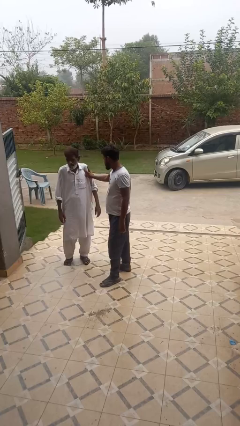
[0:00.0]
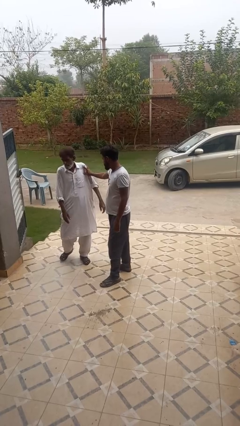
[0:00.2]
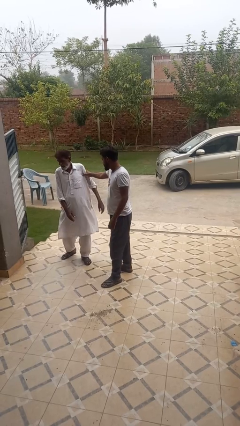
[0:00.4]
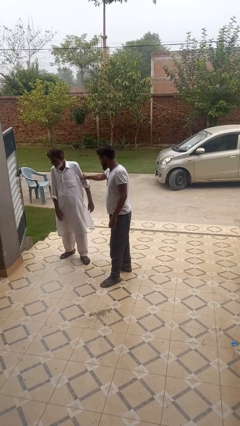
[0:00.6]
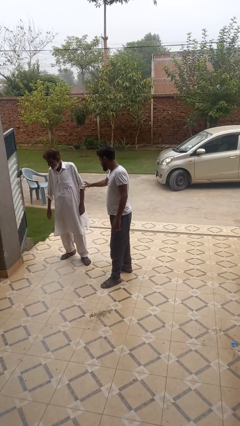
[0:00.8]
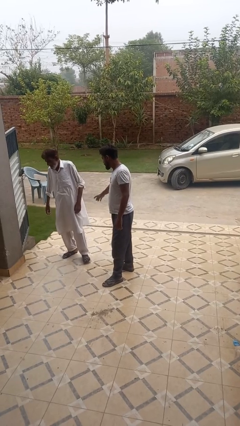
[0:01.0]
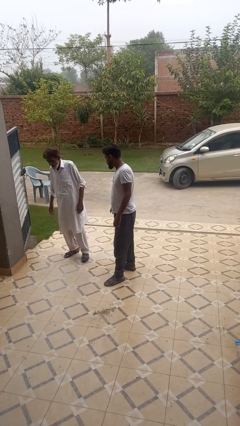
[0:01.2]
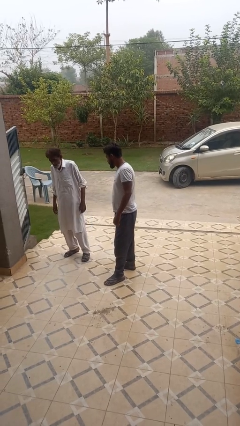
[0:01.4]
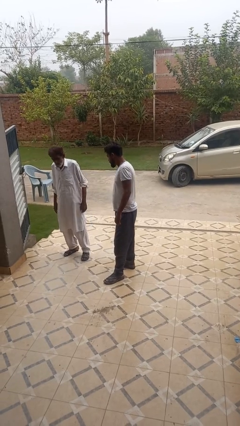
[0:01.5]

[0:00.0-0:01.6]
person shoves person

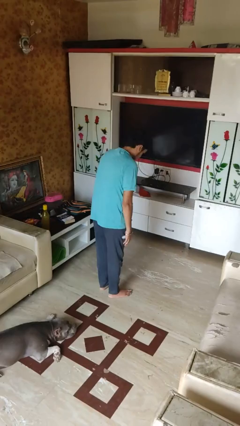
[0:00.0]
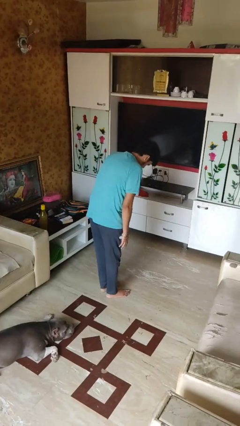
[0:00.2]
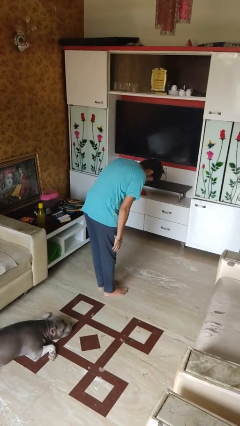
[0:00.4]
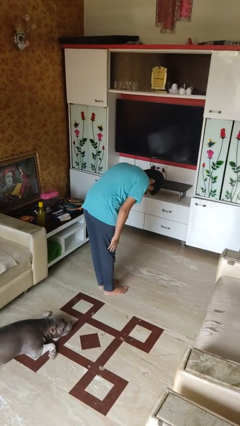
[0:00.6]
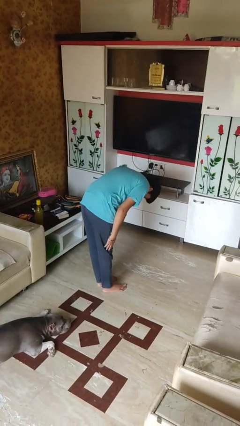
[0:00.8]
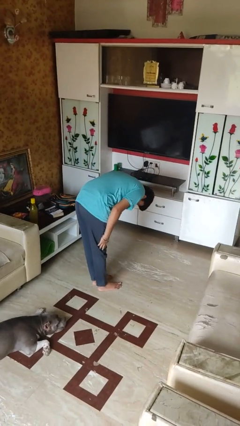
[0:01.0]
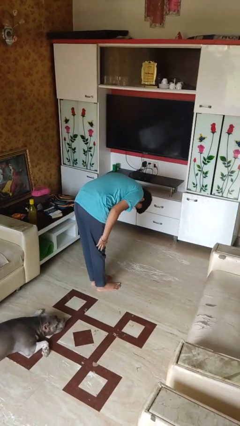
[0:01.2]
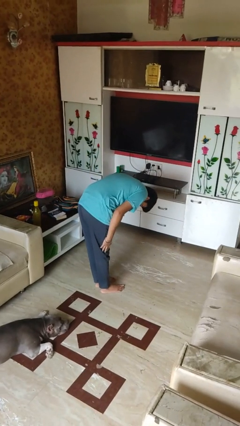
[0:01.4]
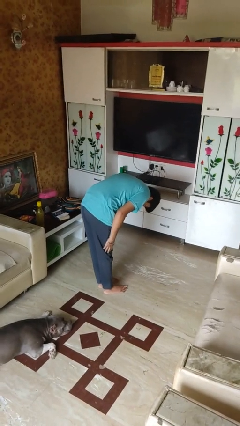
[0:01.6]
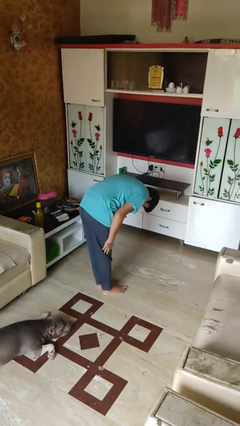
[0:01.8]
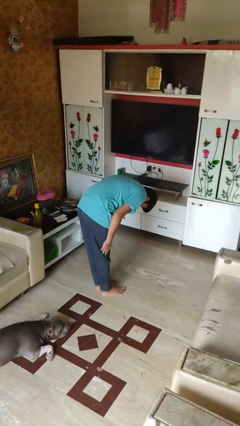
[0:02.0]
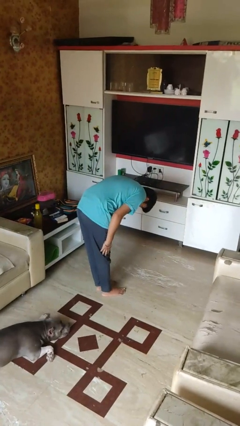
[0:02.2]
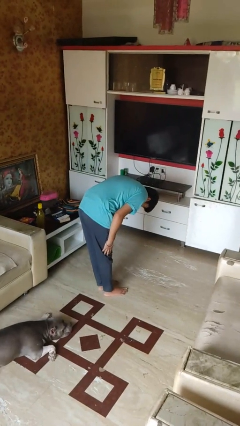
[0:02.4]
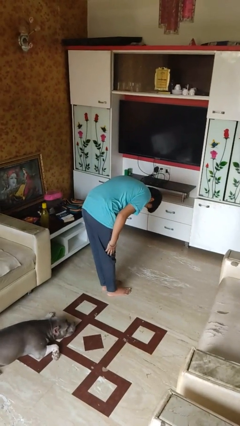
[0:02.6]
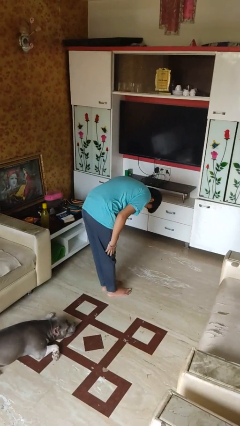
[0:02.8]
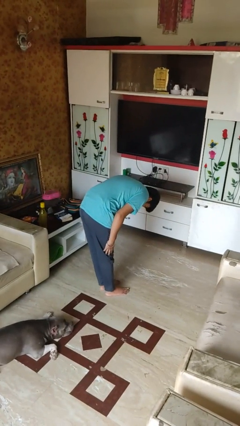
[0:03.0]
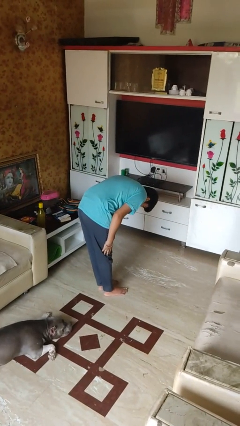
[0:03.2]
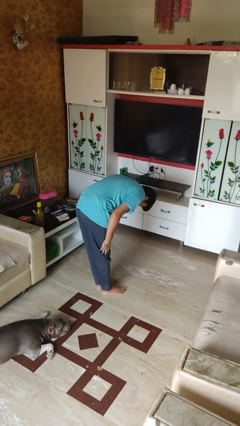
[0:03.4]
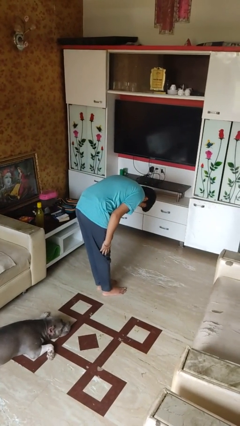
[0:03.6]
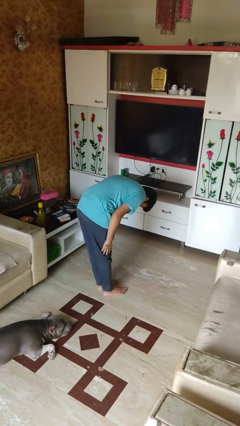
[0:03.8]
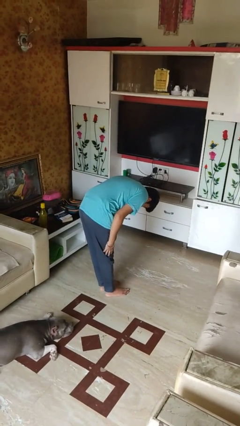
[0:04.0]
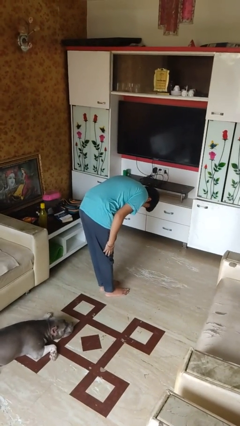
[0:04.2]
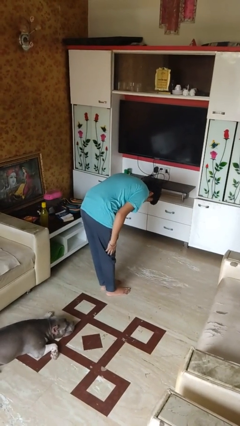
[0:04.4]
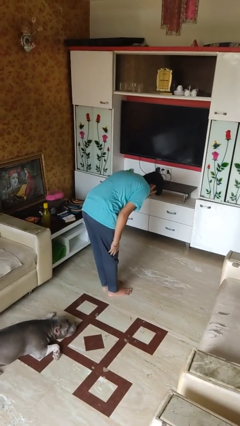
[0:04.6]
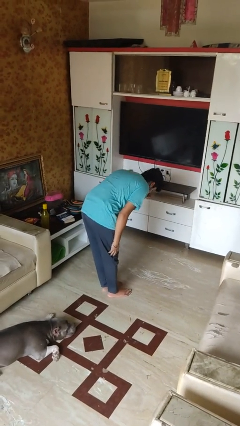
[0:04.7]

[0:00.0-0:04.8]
person bows

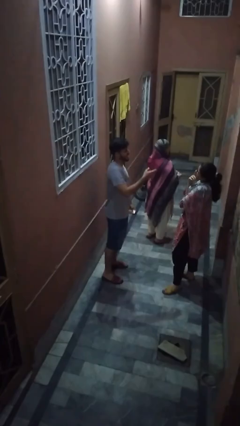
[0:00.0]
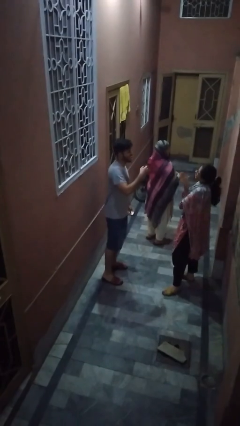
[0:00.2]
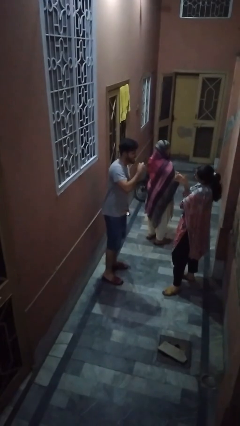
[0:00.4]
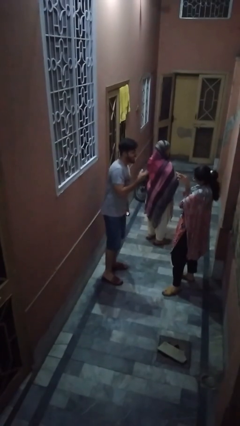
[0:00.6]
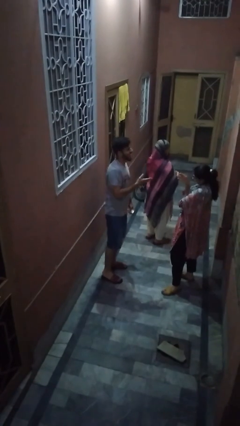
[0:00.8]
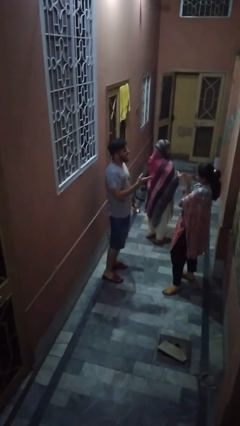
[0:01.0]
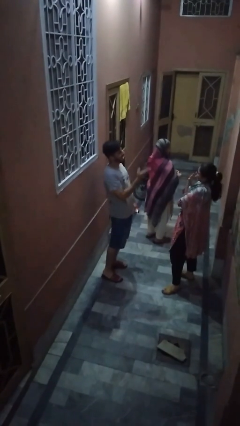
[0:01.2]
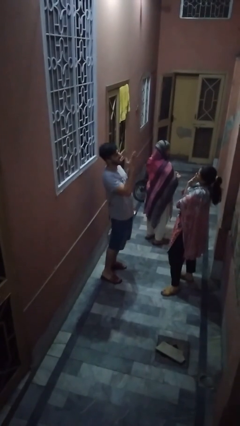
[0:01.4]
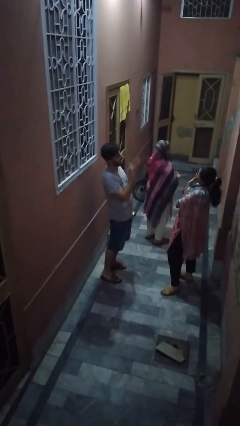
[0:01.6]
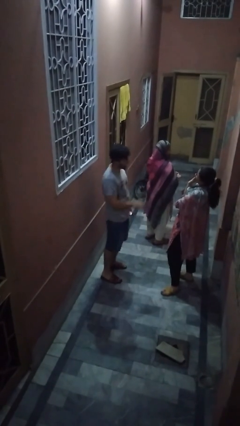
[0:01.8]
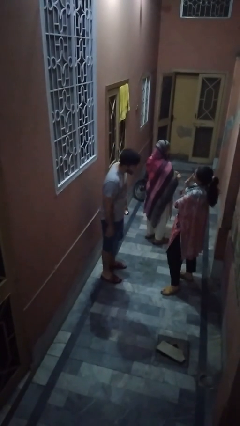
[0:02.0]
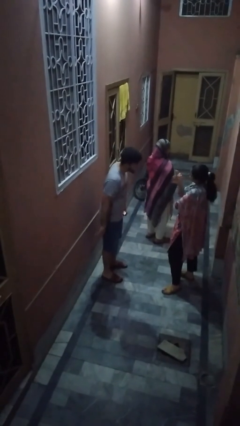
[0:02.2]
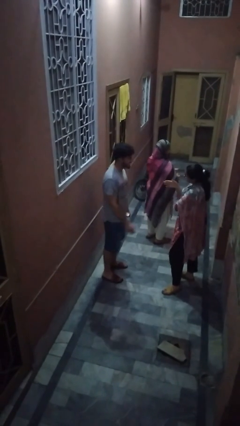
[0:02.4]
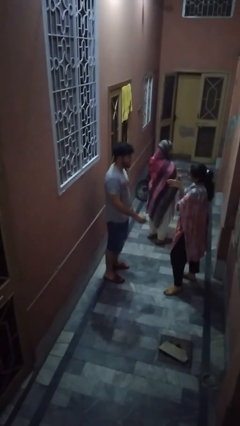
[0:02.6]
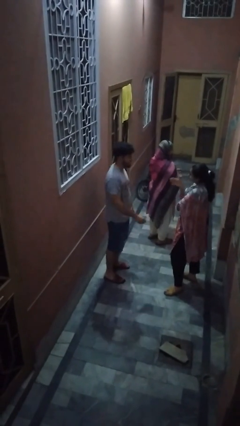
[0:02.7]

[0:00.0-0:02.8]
person laughs with person

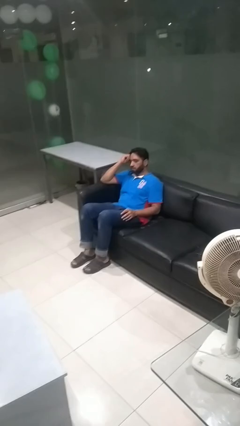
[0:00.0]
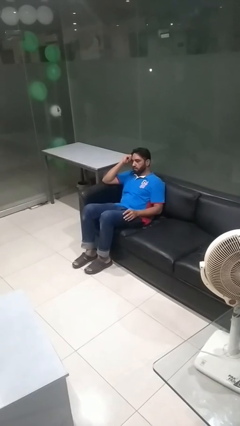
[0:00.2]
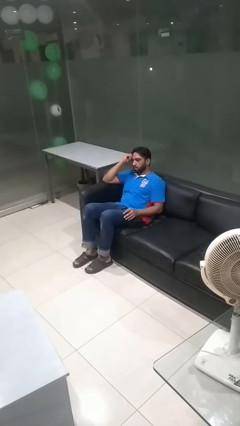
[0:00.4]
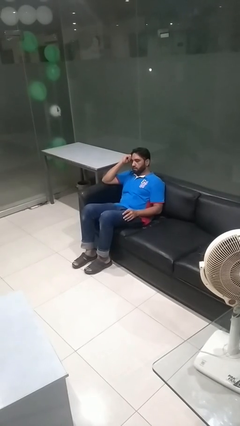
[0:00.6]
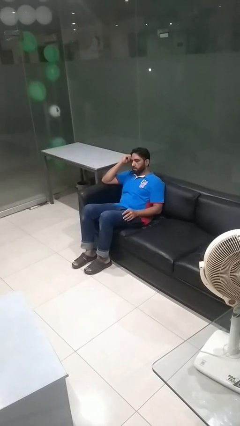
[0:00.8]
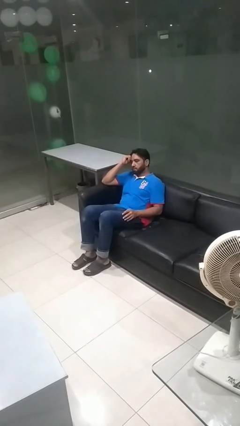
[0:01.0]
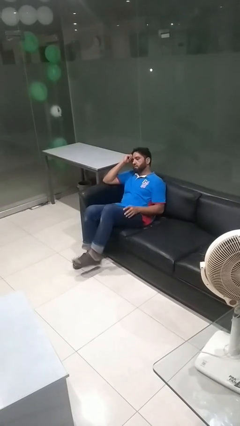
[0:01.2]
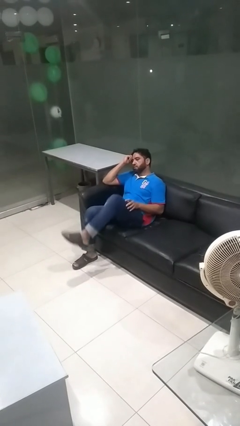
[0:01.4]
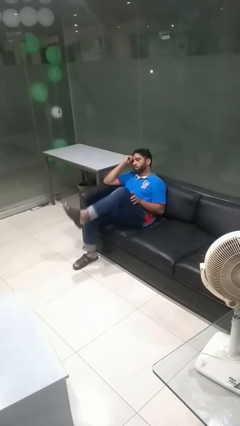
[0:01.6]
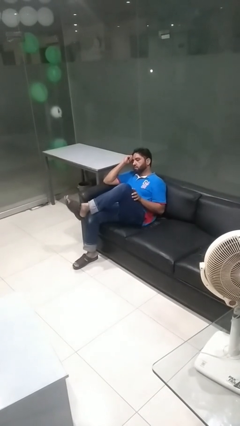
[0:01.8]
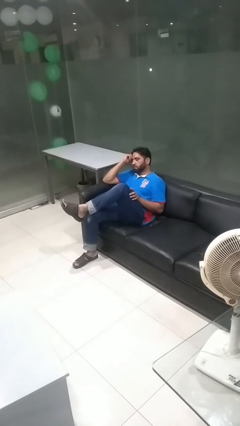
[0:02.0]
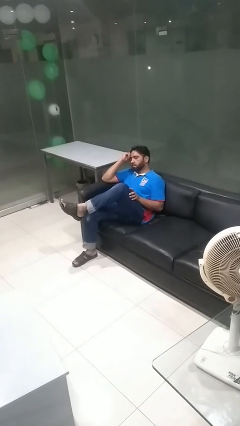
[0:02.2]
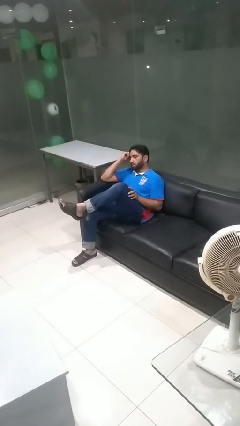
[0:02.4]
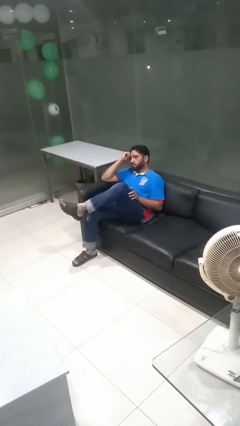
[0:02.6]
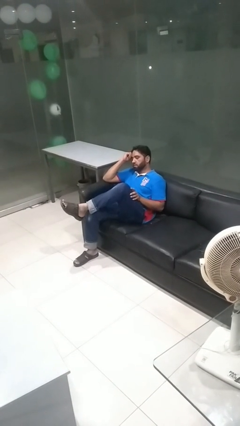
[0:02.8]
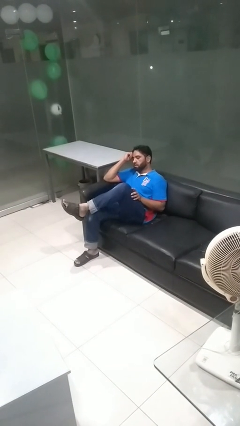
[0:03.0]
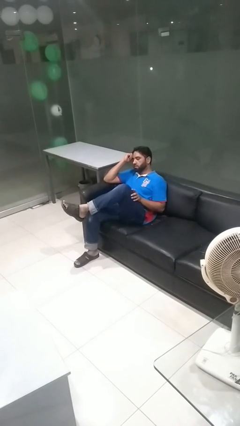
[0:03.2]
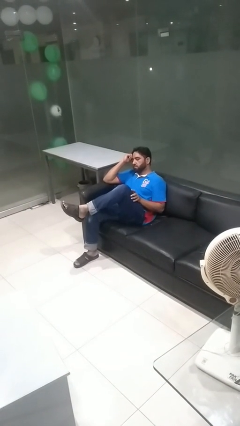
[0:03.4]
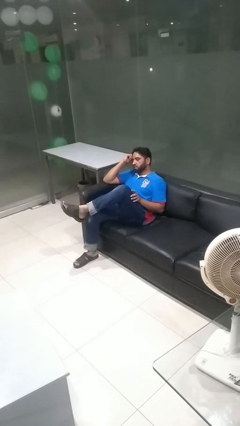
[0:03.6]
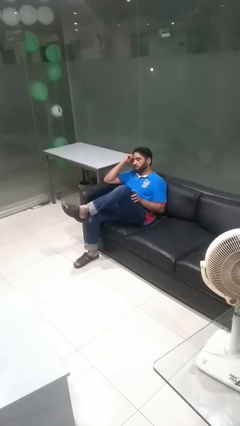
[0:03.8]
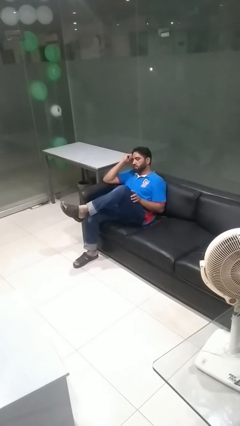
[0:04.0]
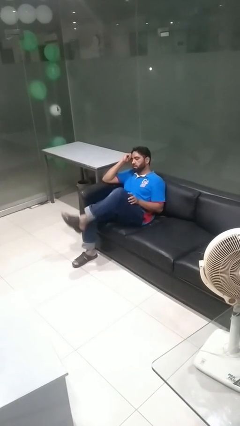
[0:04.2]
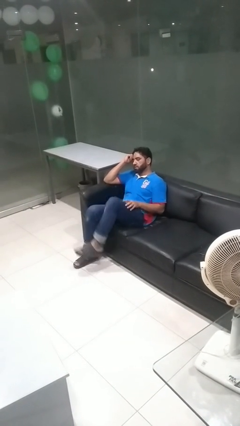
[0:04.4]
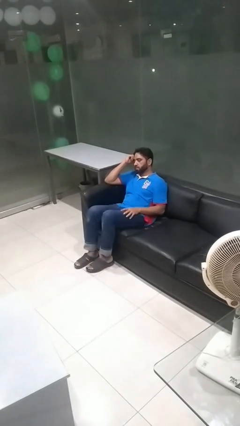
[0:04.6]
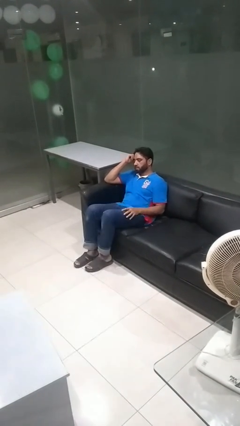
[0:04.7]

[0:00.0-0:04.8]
person crosses legs

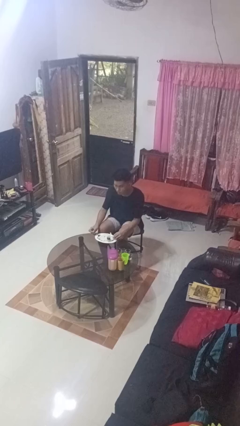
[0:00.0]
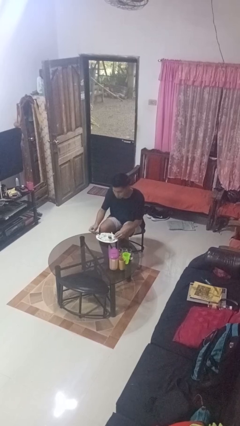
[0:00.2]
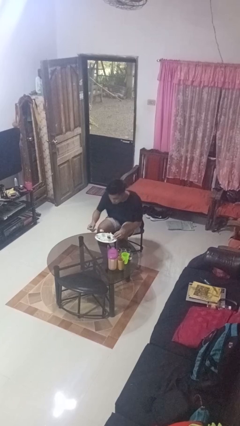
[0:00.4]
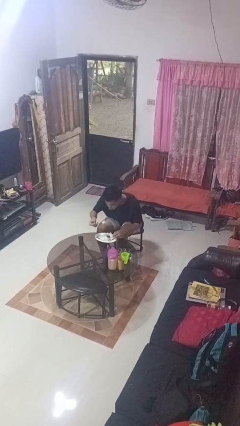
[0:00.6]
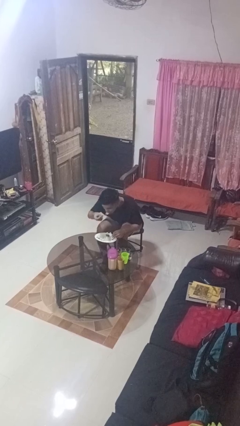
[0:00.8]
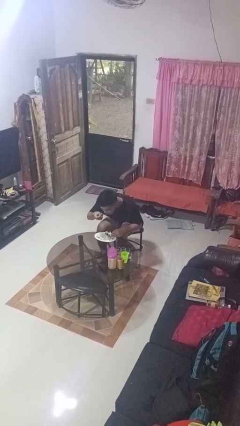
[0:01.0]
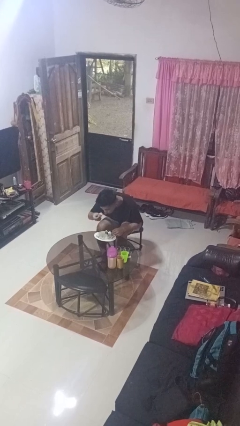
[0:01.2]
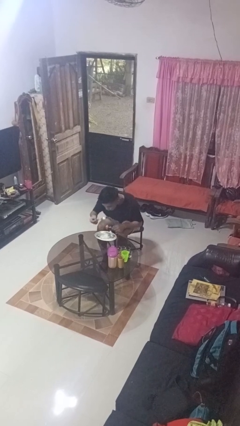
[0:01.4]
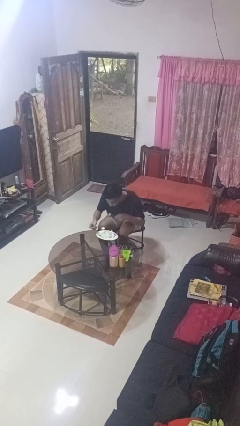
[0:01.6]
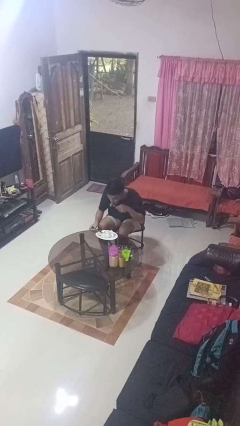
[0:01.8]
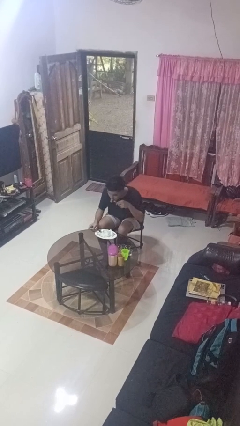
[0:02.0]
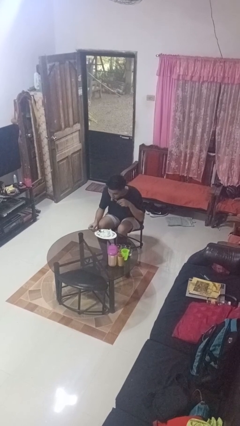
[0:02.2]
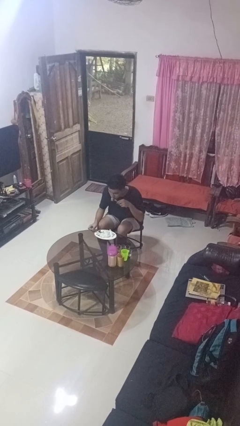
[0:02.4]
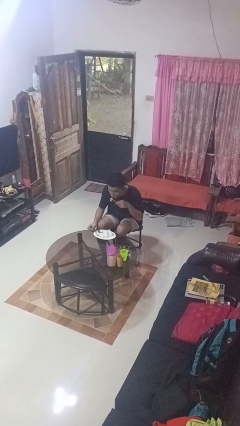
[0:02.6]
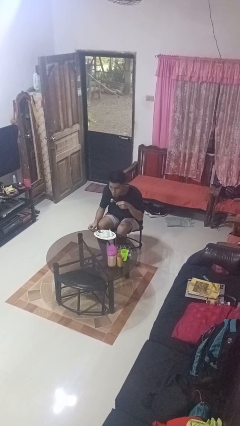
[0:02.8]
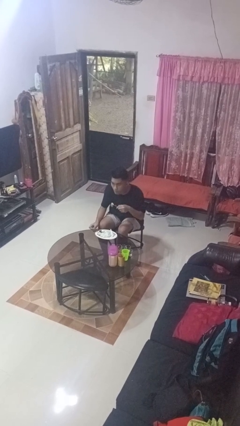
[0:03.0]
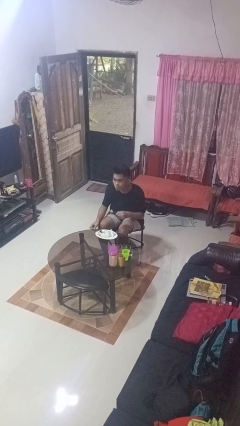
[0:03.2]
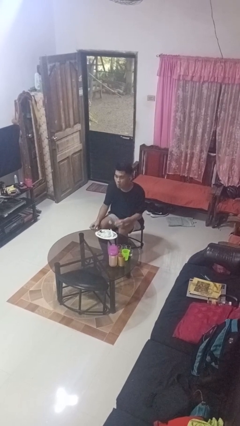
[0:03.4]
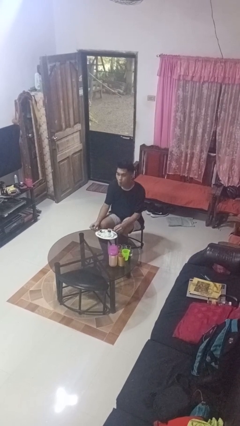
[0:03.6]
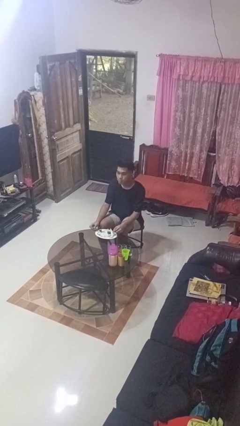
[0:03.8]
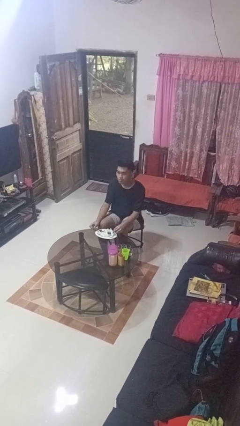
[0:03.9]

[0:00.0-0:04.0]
person eats with utensil
